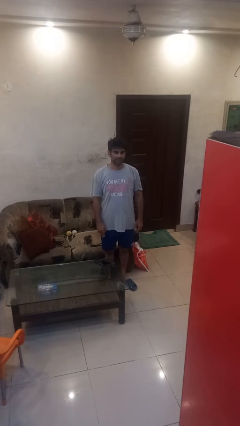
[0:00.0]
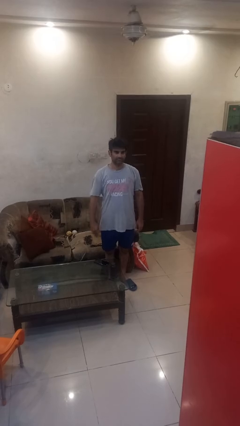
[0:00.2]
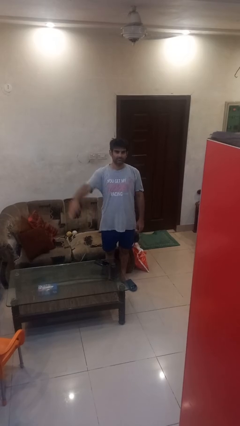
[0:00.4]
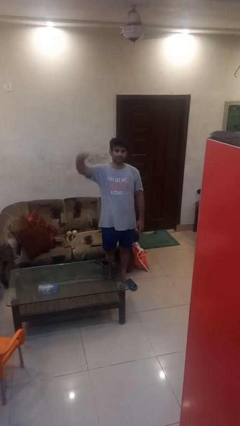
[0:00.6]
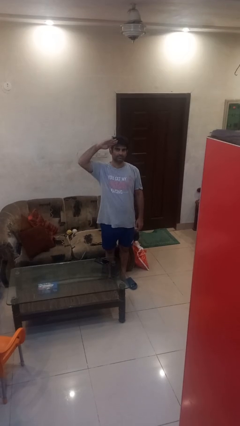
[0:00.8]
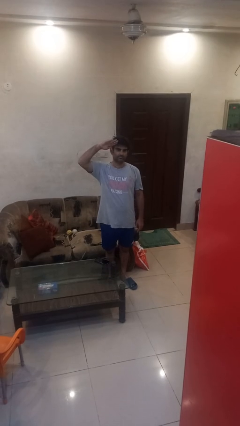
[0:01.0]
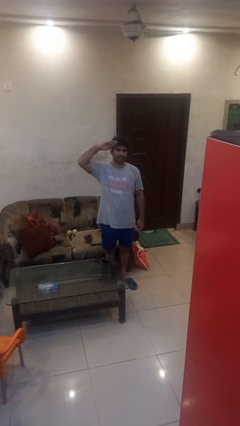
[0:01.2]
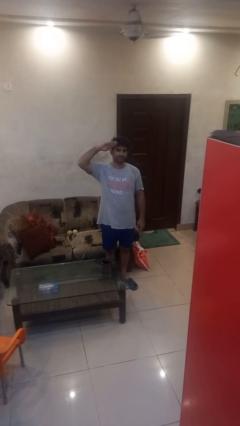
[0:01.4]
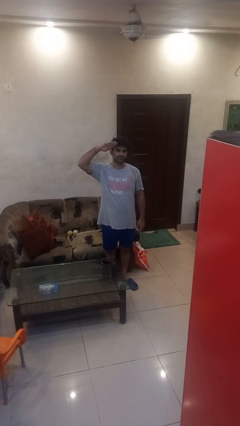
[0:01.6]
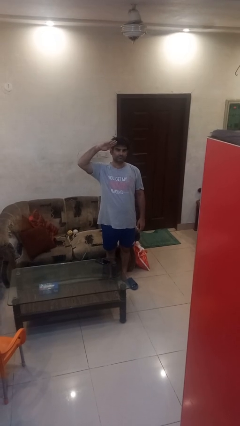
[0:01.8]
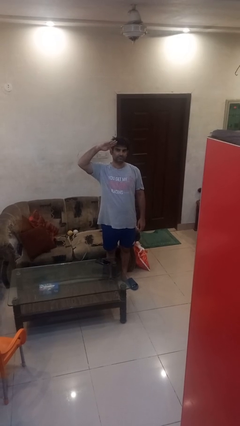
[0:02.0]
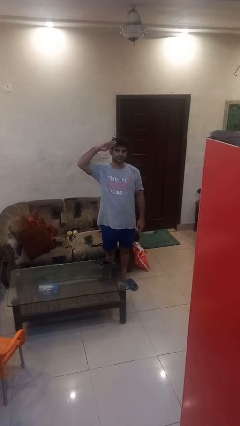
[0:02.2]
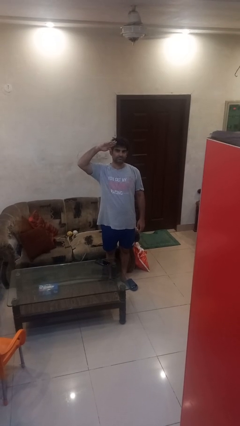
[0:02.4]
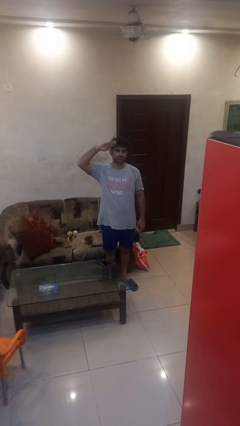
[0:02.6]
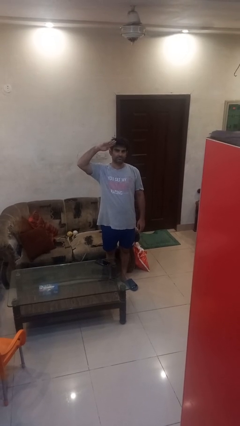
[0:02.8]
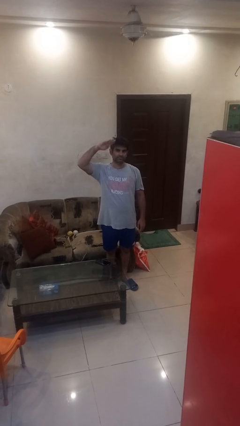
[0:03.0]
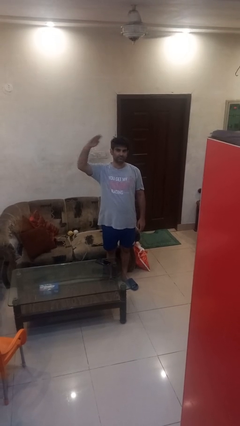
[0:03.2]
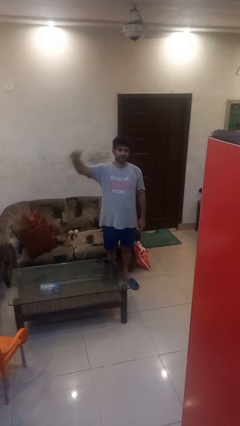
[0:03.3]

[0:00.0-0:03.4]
person salutes

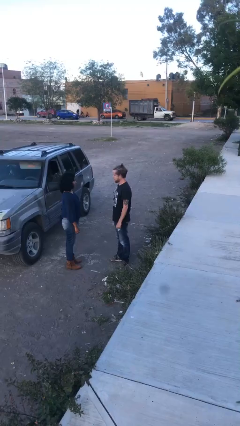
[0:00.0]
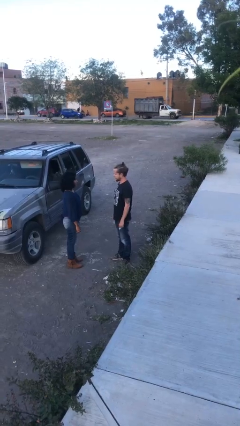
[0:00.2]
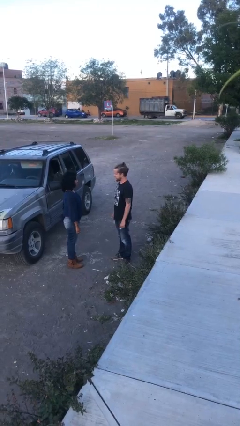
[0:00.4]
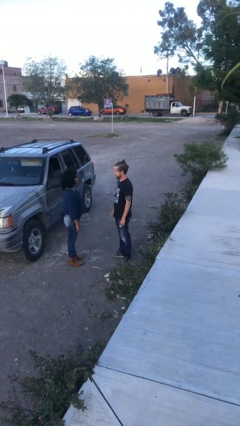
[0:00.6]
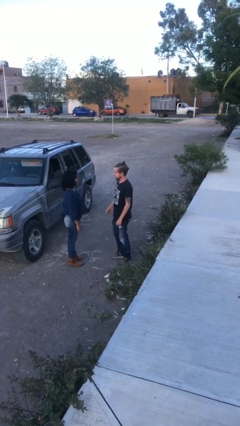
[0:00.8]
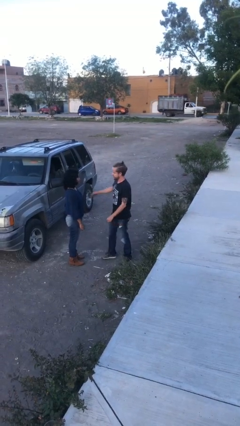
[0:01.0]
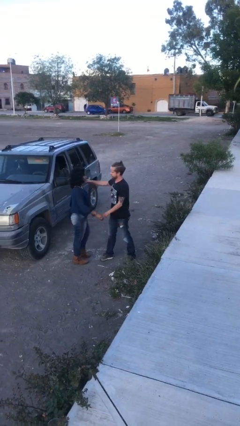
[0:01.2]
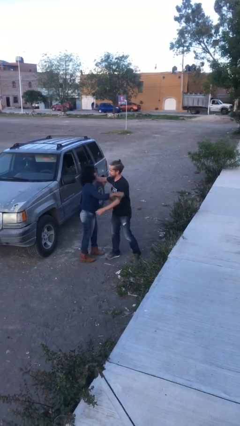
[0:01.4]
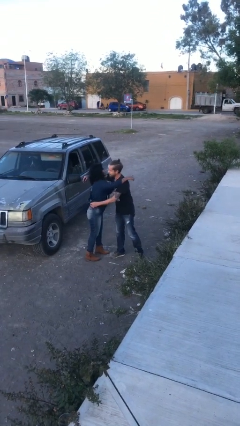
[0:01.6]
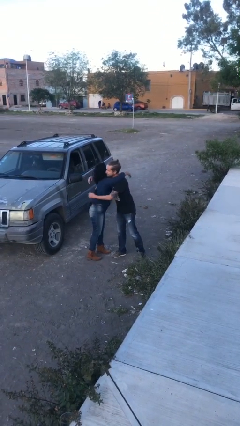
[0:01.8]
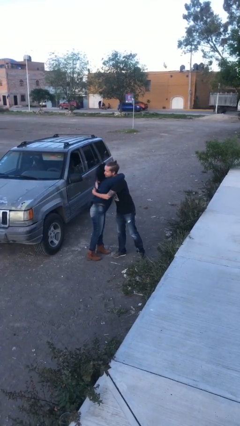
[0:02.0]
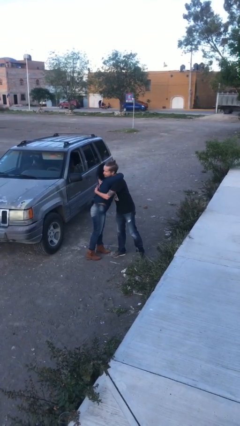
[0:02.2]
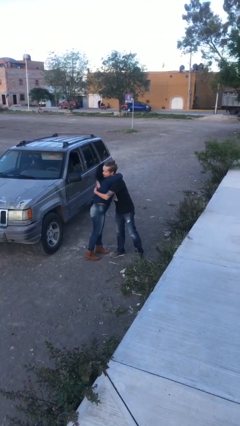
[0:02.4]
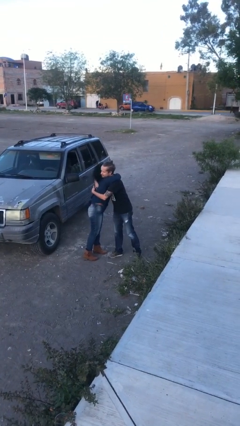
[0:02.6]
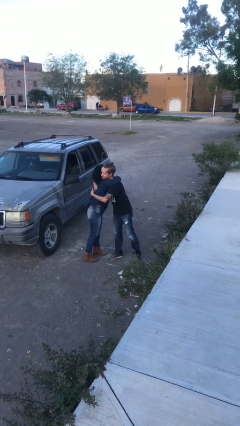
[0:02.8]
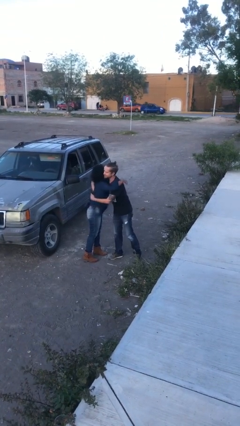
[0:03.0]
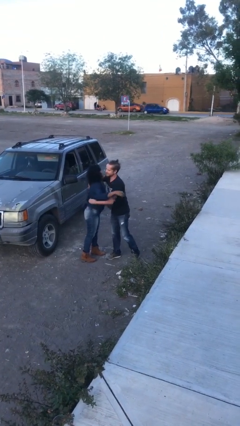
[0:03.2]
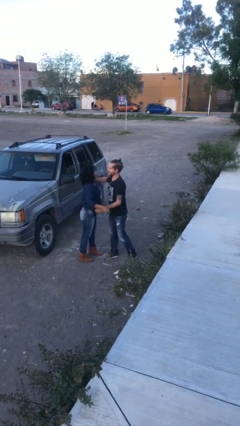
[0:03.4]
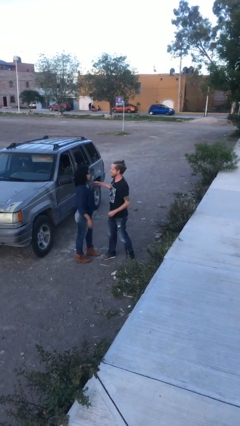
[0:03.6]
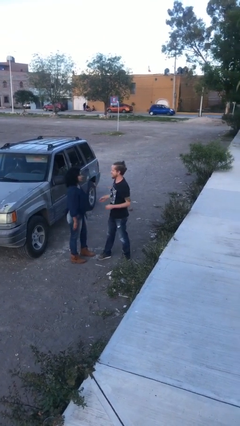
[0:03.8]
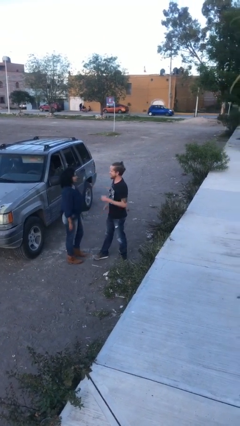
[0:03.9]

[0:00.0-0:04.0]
person embraces person

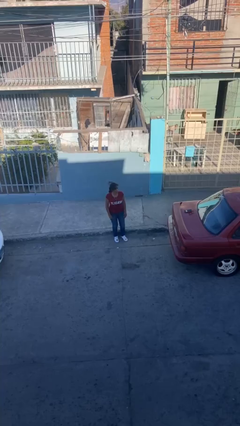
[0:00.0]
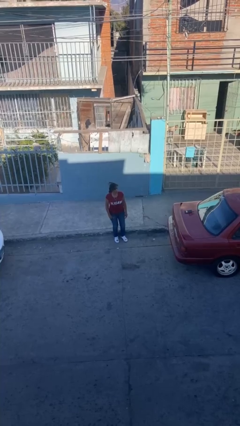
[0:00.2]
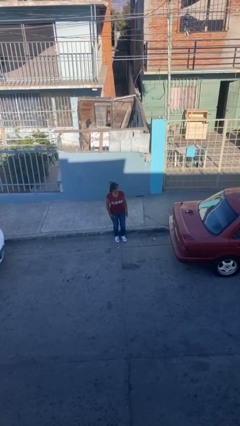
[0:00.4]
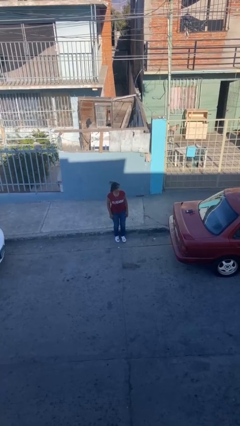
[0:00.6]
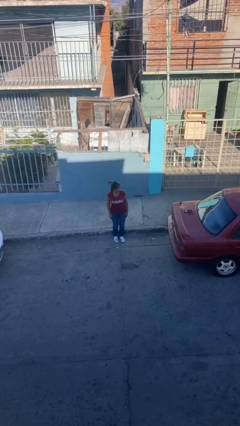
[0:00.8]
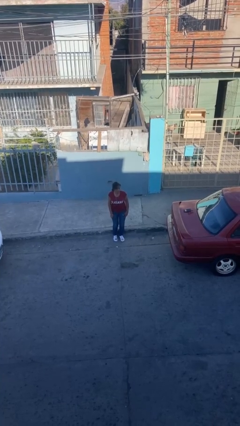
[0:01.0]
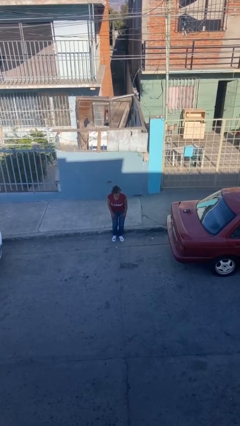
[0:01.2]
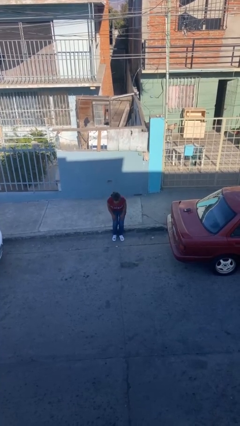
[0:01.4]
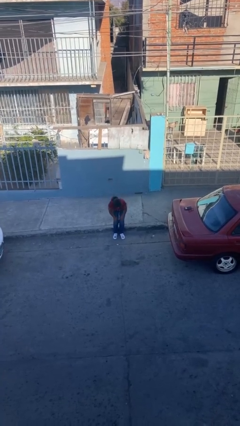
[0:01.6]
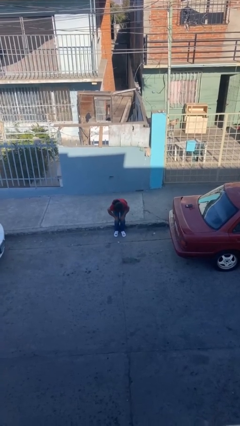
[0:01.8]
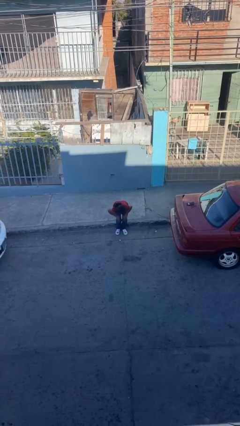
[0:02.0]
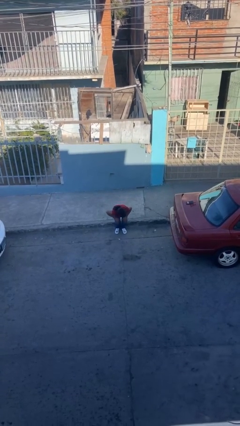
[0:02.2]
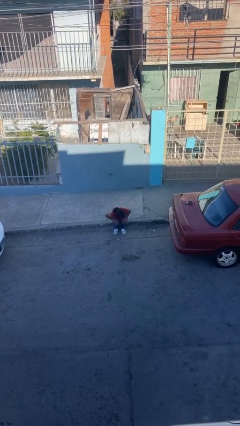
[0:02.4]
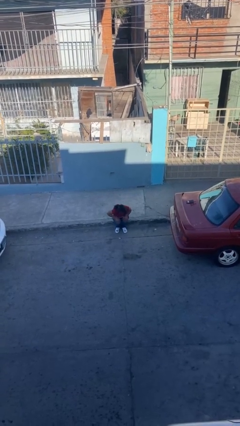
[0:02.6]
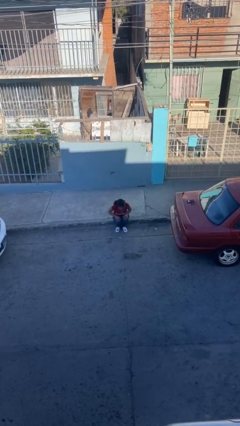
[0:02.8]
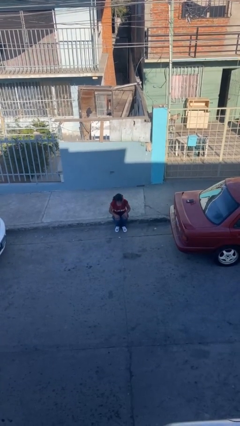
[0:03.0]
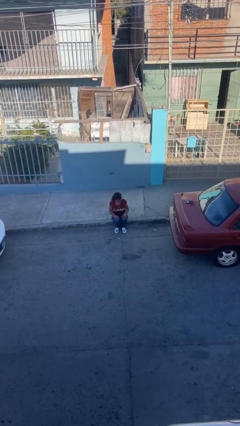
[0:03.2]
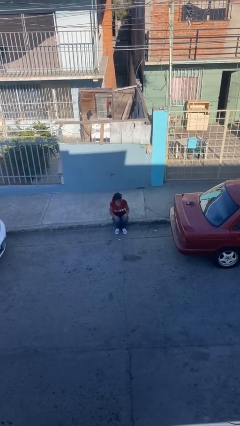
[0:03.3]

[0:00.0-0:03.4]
person sits down

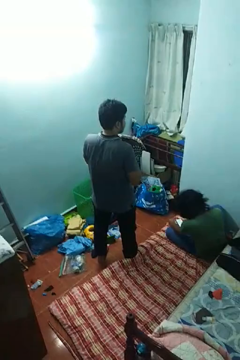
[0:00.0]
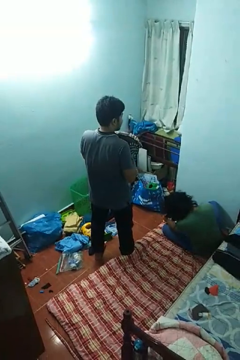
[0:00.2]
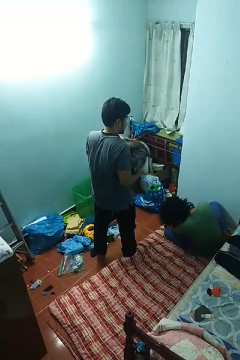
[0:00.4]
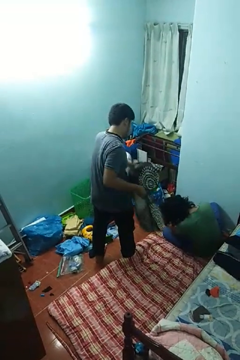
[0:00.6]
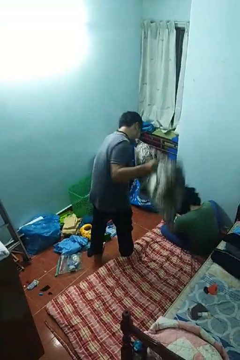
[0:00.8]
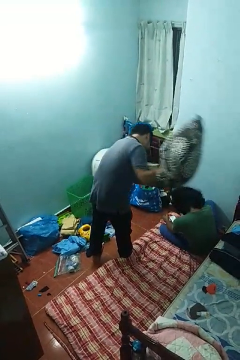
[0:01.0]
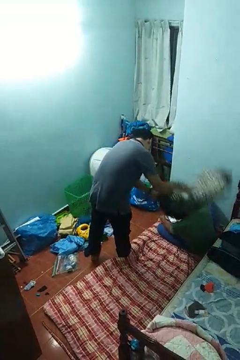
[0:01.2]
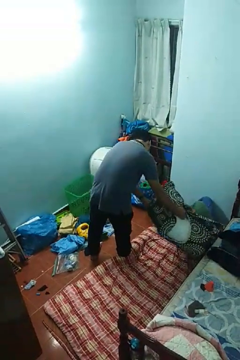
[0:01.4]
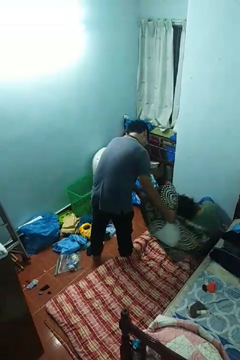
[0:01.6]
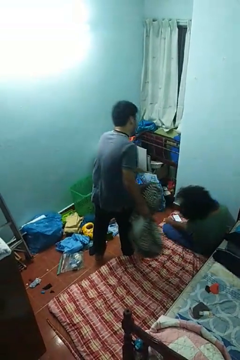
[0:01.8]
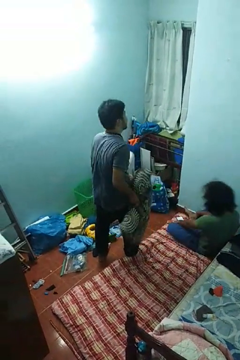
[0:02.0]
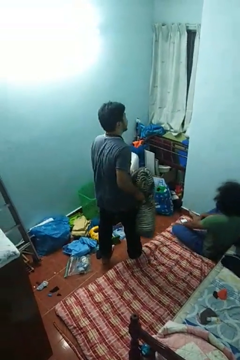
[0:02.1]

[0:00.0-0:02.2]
person hits person with pillow

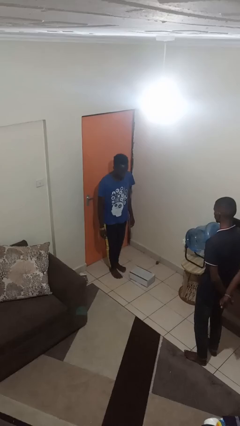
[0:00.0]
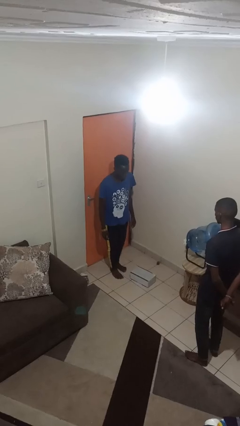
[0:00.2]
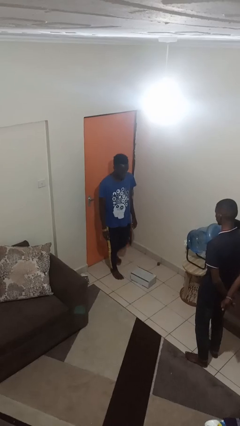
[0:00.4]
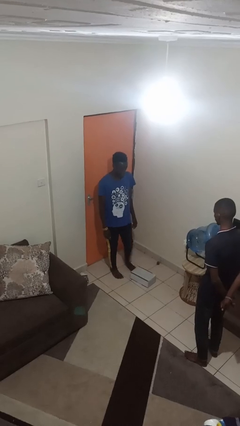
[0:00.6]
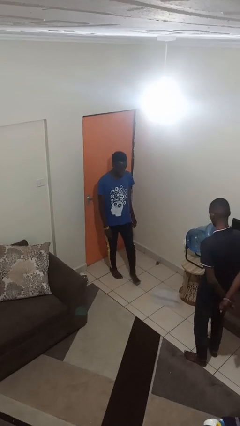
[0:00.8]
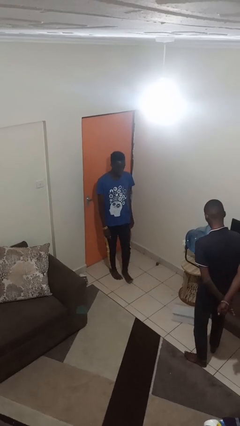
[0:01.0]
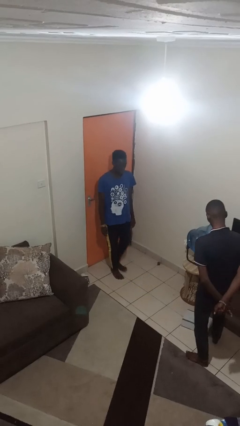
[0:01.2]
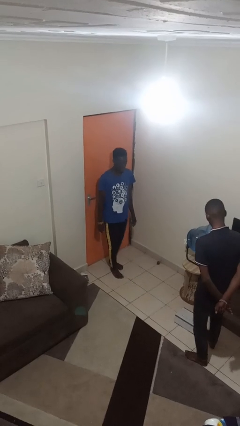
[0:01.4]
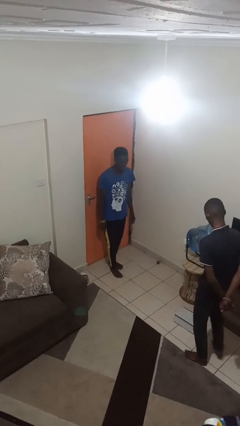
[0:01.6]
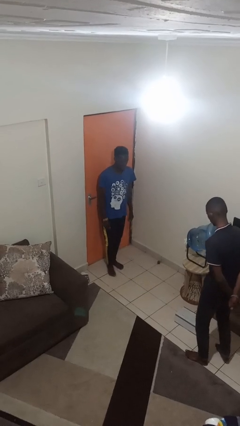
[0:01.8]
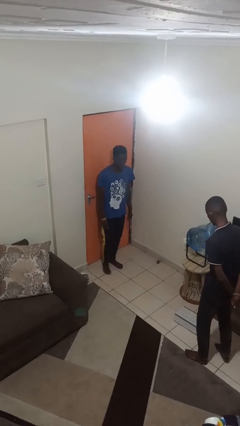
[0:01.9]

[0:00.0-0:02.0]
person kicks object to person

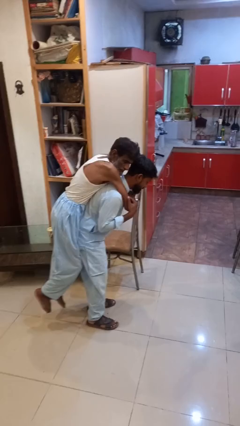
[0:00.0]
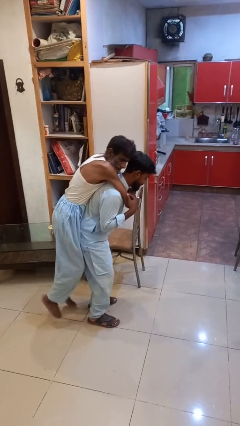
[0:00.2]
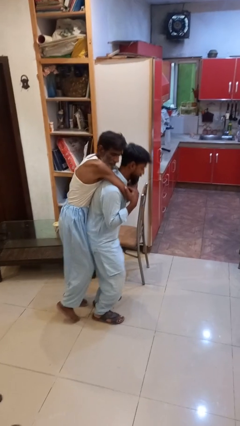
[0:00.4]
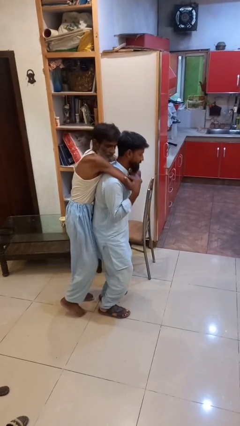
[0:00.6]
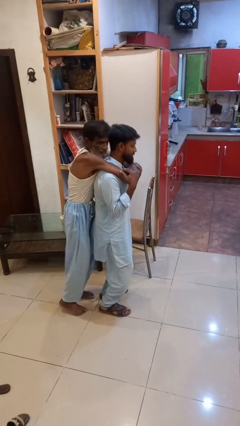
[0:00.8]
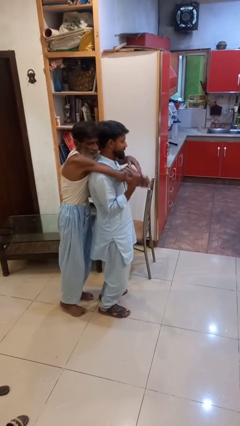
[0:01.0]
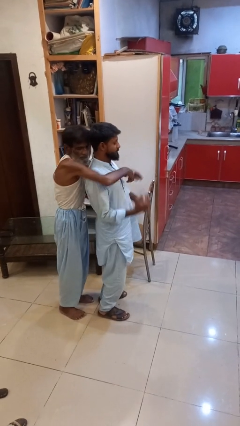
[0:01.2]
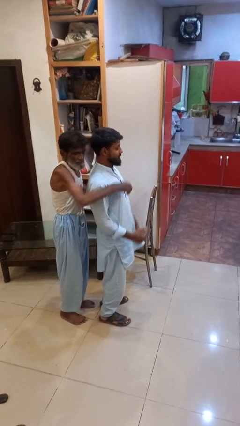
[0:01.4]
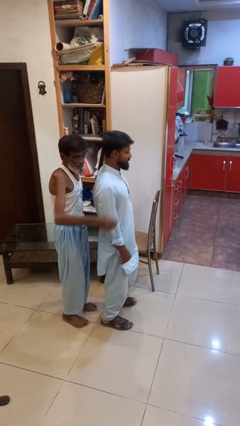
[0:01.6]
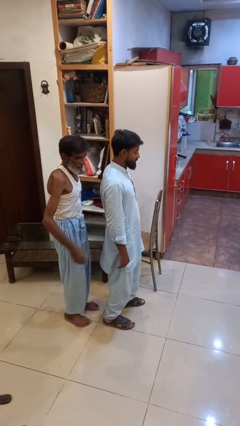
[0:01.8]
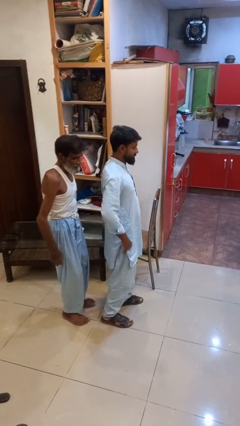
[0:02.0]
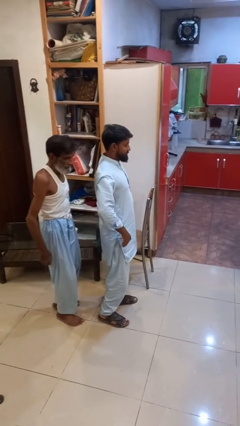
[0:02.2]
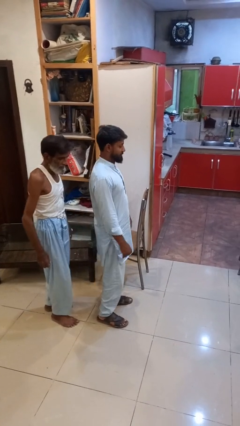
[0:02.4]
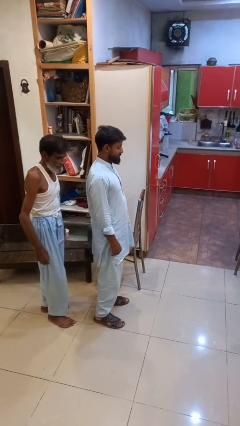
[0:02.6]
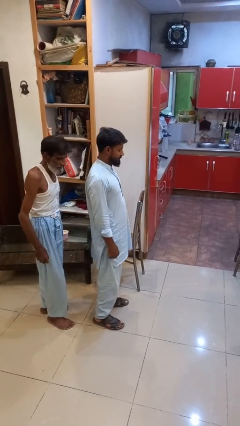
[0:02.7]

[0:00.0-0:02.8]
person puts down person
